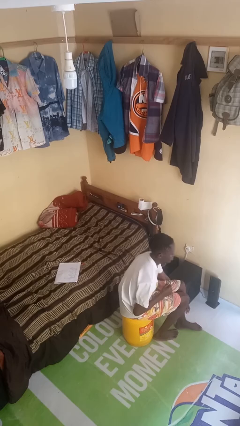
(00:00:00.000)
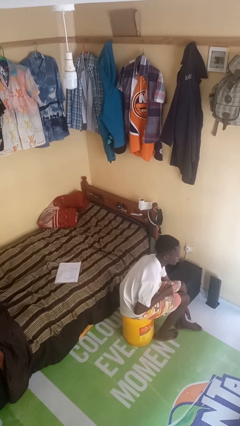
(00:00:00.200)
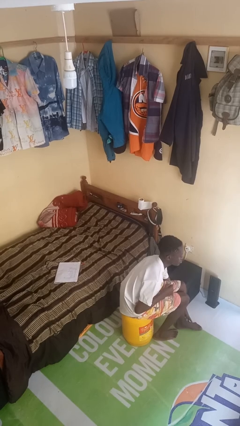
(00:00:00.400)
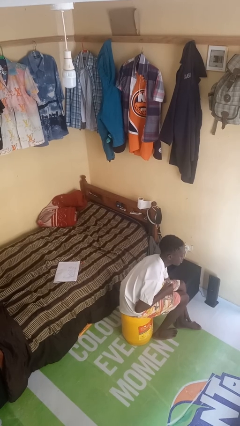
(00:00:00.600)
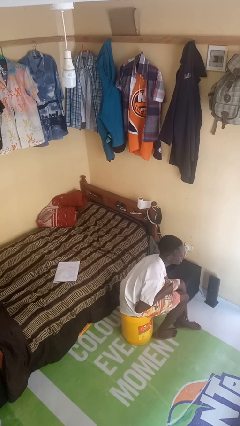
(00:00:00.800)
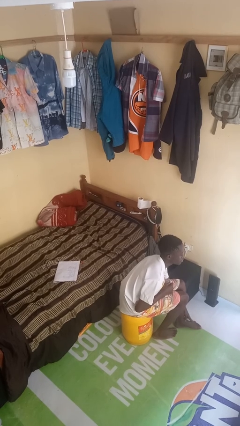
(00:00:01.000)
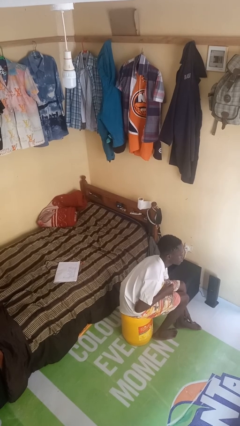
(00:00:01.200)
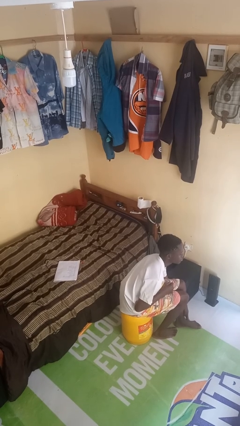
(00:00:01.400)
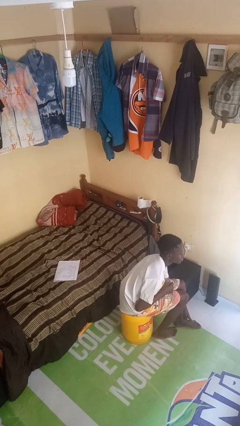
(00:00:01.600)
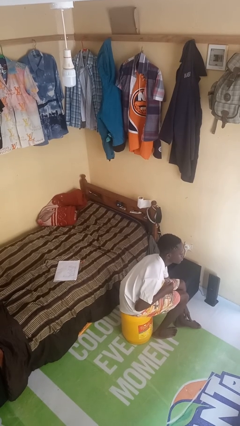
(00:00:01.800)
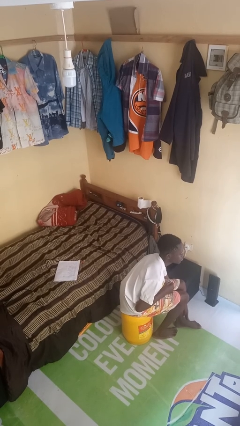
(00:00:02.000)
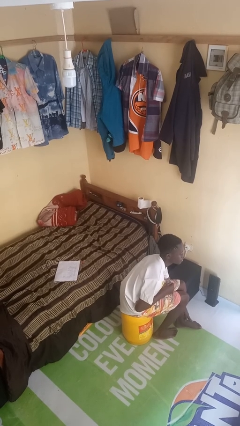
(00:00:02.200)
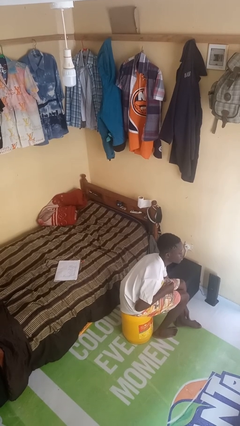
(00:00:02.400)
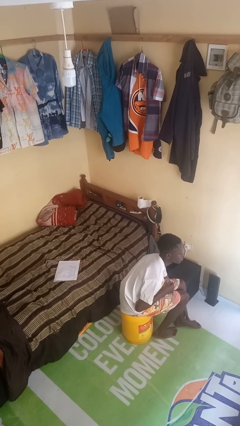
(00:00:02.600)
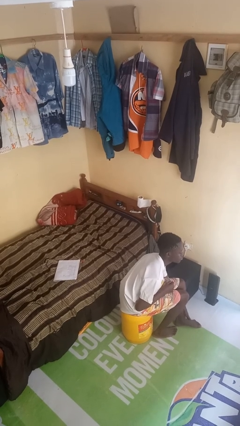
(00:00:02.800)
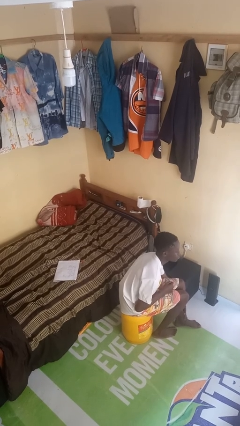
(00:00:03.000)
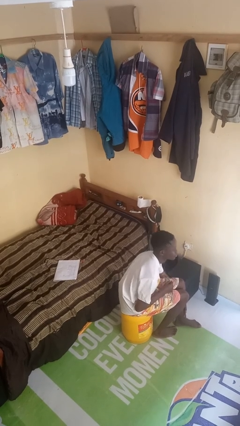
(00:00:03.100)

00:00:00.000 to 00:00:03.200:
person rubs foot

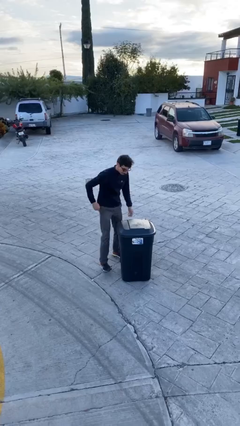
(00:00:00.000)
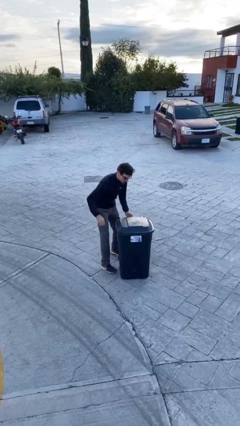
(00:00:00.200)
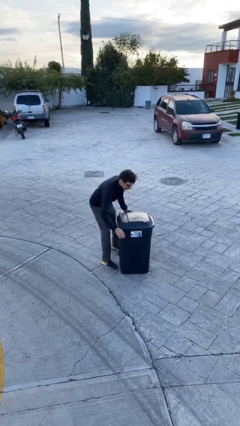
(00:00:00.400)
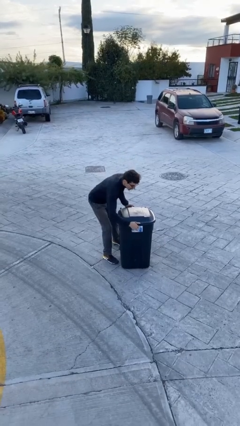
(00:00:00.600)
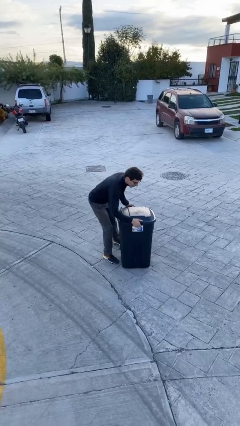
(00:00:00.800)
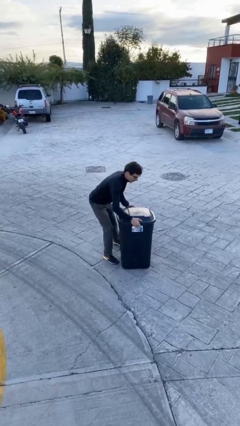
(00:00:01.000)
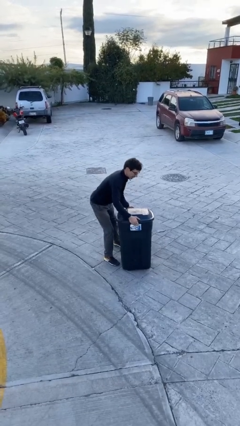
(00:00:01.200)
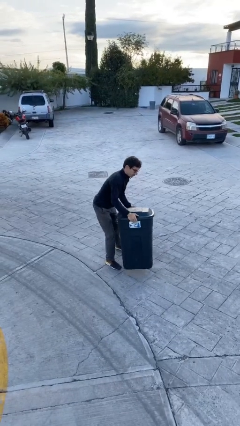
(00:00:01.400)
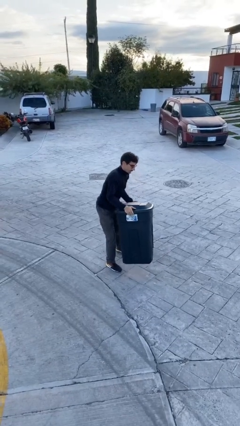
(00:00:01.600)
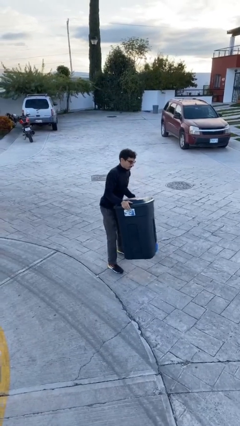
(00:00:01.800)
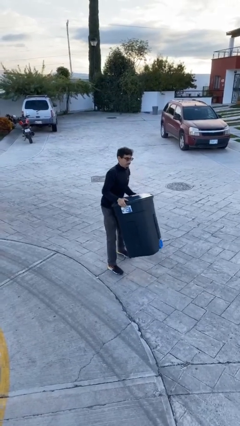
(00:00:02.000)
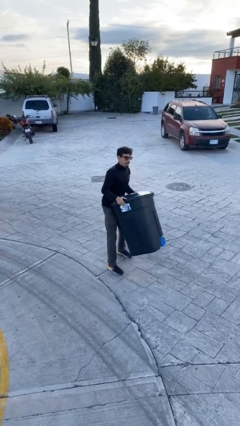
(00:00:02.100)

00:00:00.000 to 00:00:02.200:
person picks up object from floor

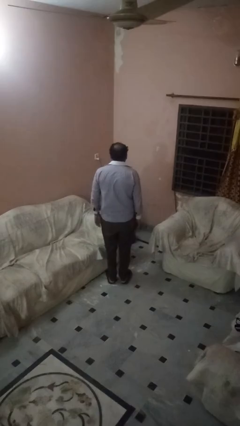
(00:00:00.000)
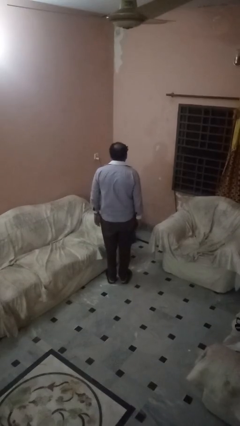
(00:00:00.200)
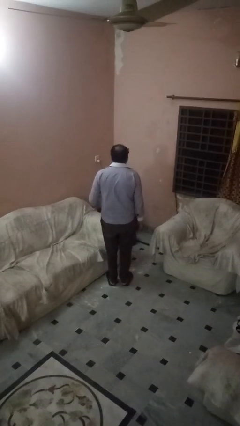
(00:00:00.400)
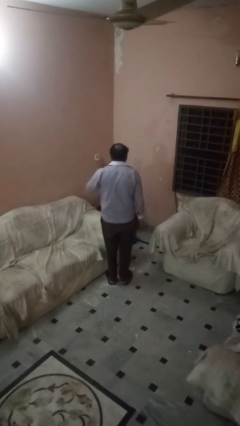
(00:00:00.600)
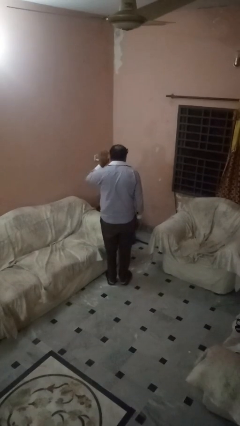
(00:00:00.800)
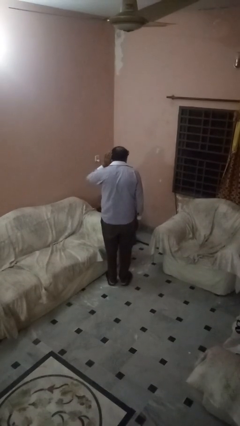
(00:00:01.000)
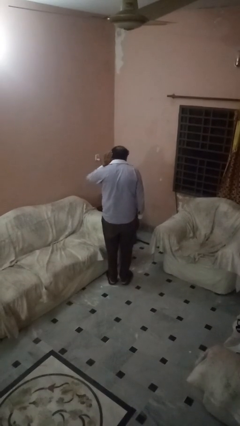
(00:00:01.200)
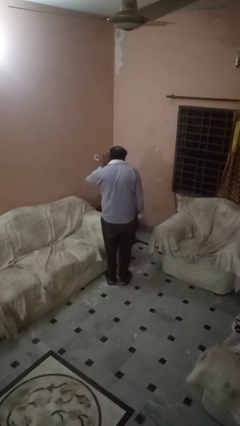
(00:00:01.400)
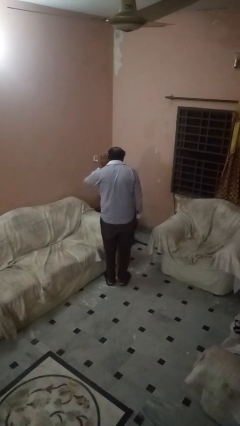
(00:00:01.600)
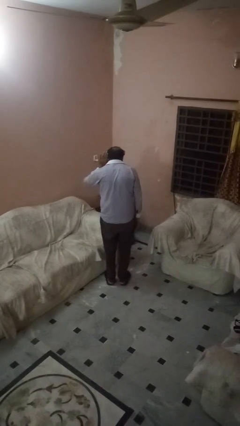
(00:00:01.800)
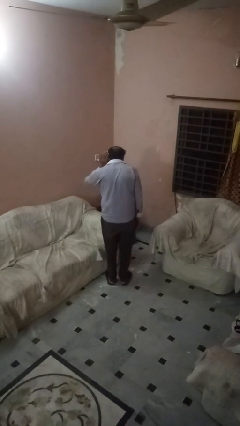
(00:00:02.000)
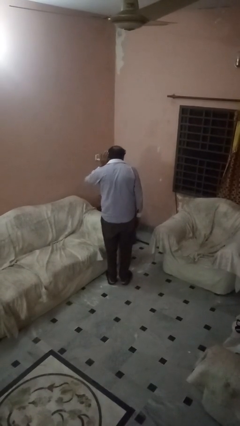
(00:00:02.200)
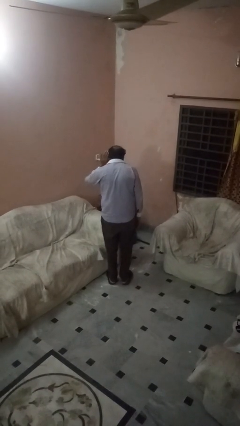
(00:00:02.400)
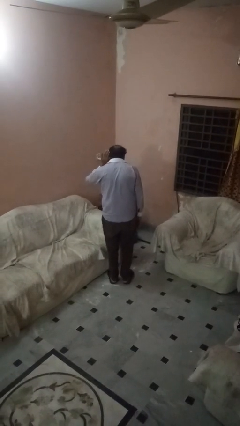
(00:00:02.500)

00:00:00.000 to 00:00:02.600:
person gestures listen closely

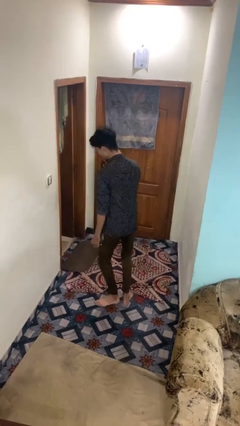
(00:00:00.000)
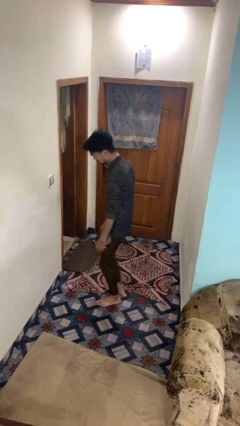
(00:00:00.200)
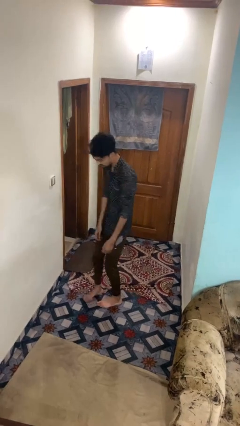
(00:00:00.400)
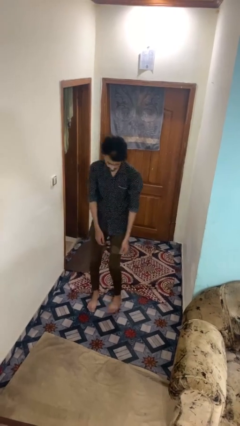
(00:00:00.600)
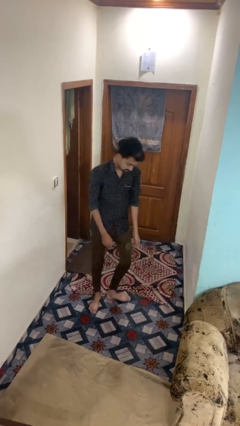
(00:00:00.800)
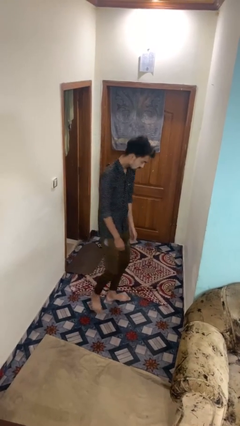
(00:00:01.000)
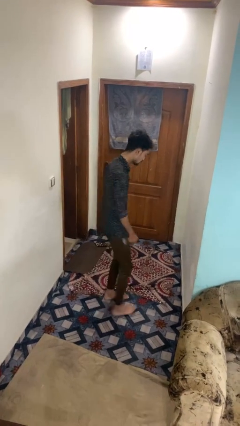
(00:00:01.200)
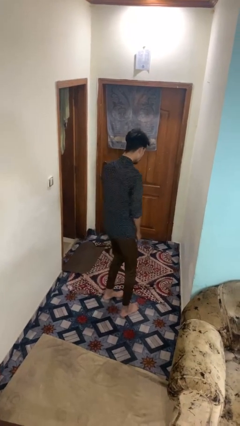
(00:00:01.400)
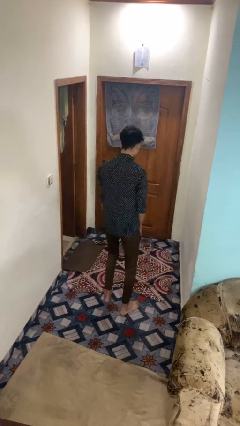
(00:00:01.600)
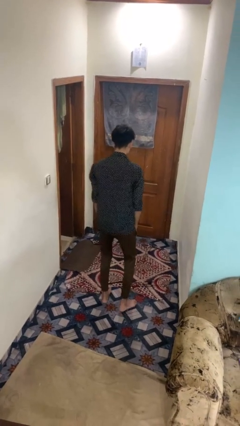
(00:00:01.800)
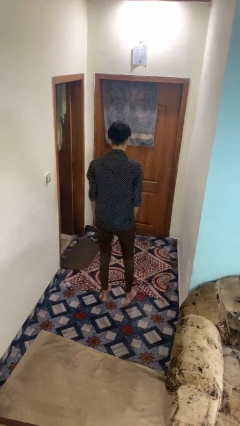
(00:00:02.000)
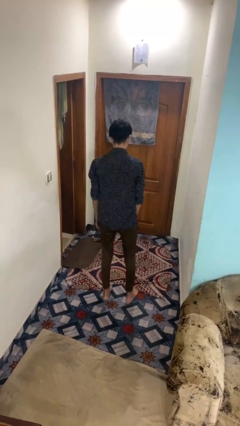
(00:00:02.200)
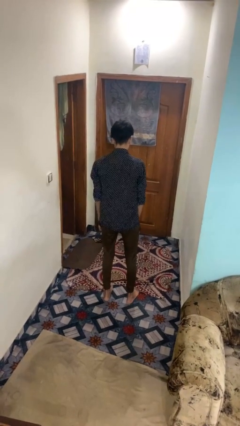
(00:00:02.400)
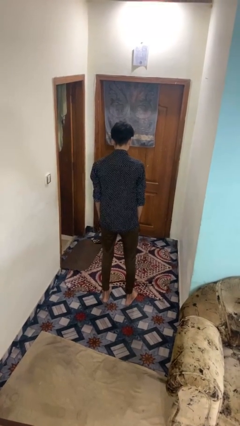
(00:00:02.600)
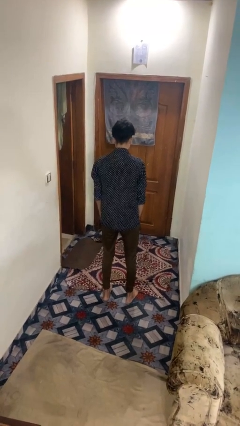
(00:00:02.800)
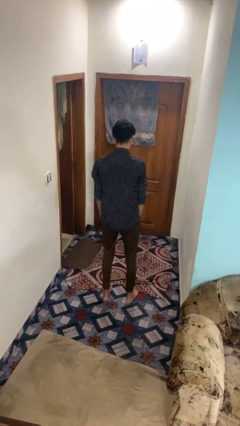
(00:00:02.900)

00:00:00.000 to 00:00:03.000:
person twirls

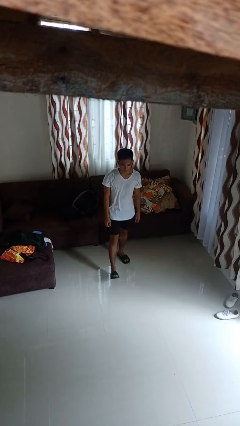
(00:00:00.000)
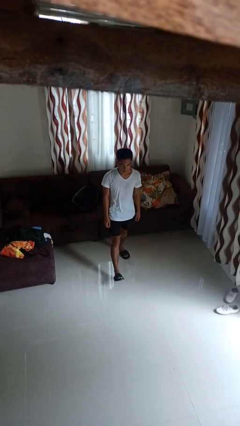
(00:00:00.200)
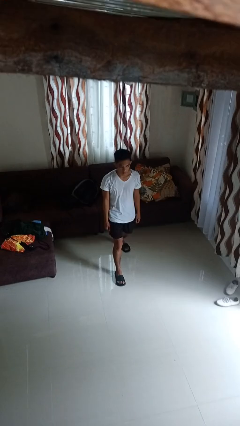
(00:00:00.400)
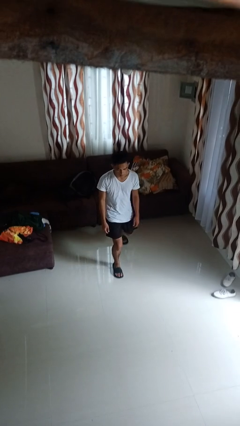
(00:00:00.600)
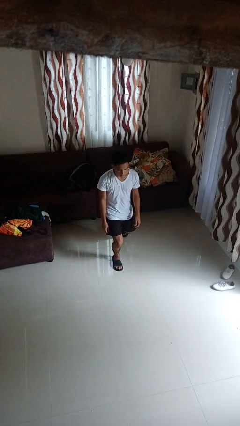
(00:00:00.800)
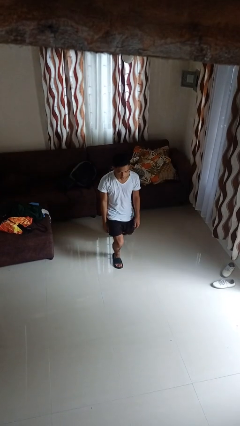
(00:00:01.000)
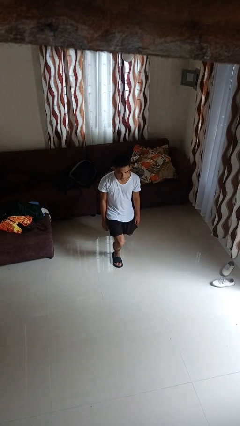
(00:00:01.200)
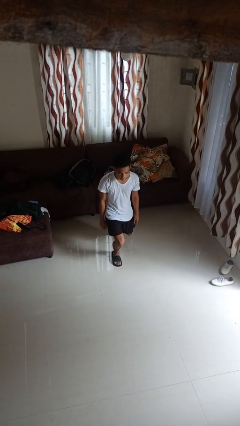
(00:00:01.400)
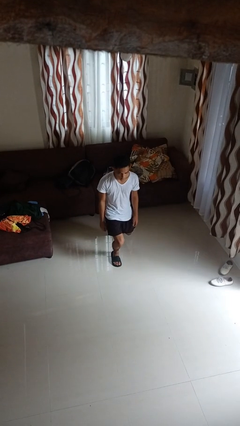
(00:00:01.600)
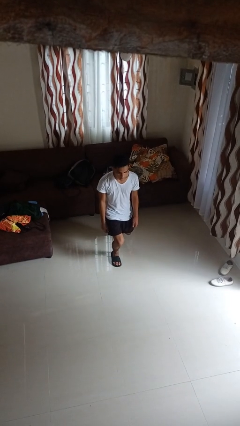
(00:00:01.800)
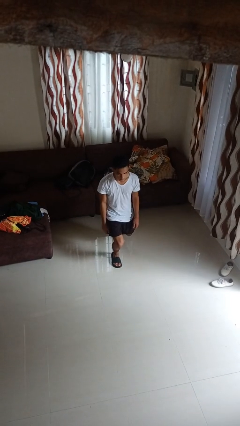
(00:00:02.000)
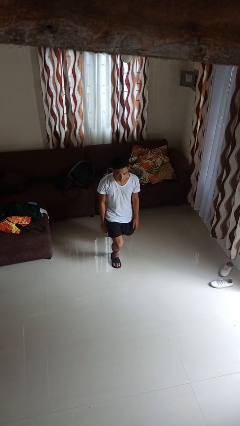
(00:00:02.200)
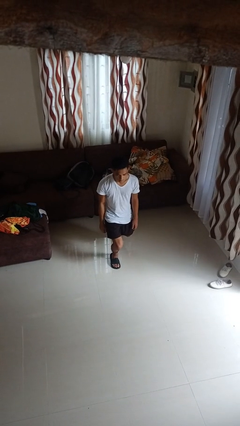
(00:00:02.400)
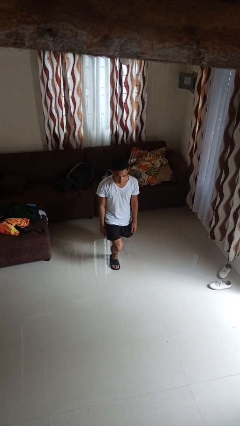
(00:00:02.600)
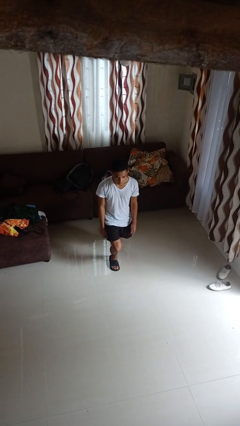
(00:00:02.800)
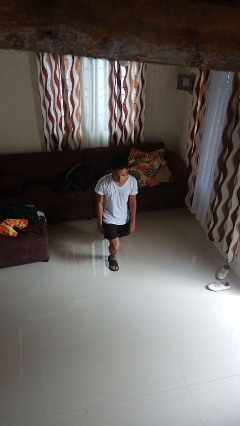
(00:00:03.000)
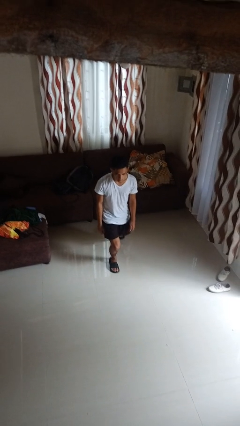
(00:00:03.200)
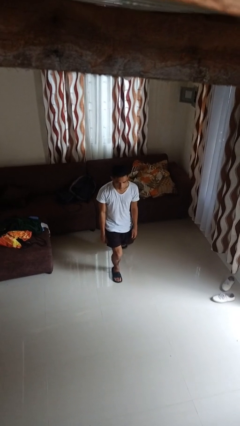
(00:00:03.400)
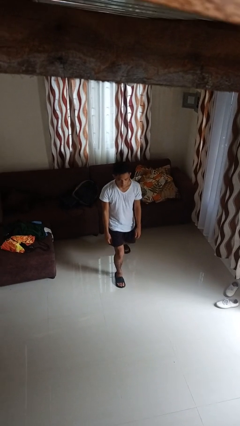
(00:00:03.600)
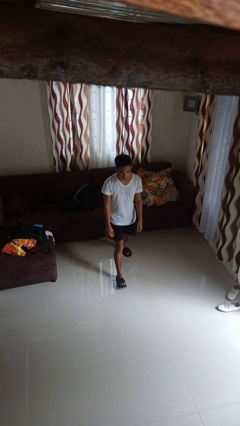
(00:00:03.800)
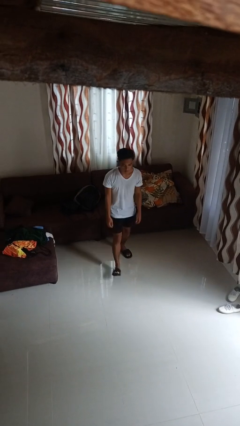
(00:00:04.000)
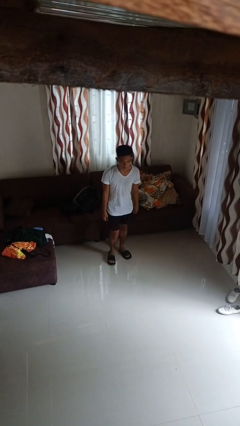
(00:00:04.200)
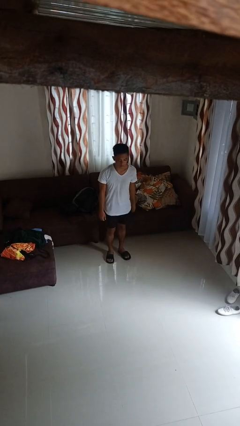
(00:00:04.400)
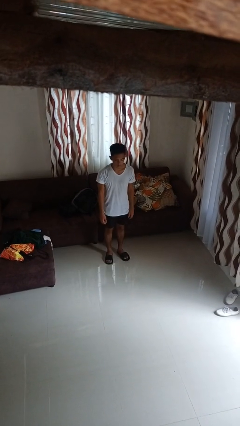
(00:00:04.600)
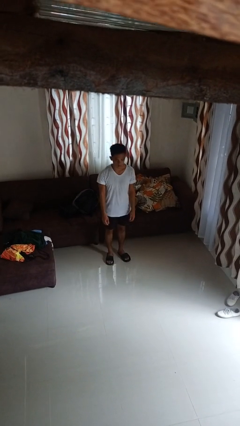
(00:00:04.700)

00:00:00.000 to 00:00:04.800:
person exercises with lunges

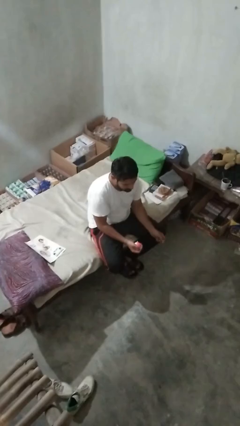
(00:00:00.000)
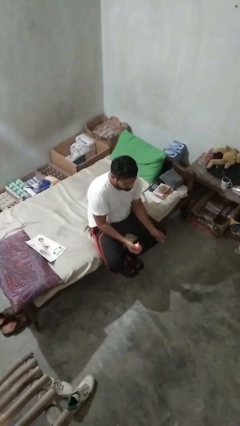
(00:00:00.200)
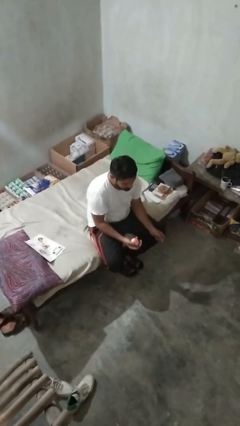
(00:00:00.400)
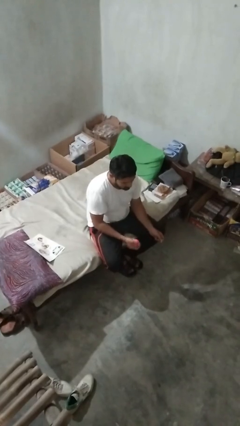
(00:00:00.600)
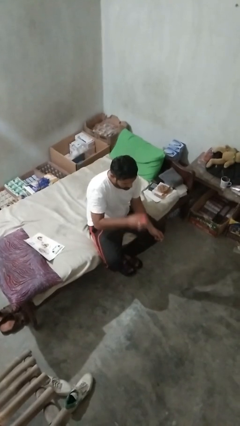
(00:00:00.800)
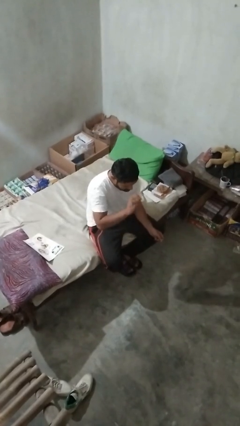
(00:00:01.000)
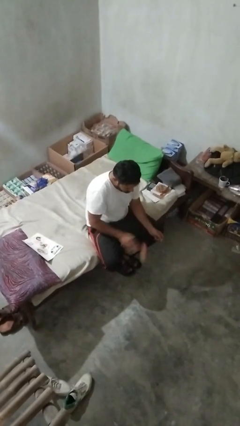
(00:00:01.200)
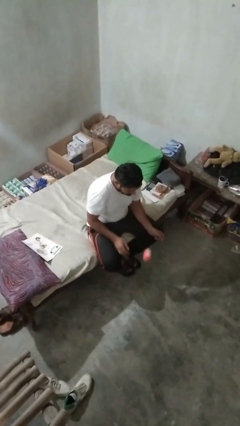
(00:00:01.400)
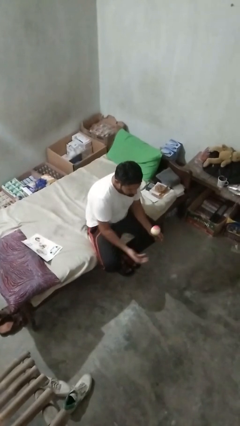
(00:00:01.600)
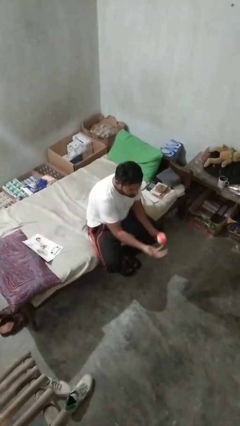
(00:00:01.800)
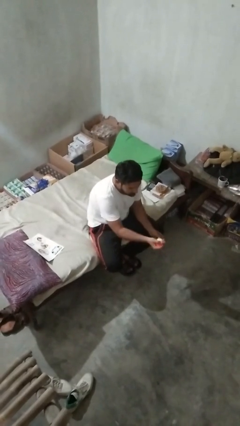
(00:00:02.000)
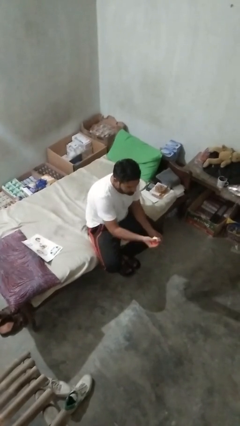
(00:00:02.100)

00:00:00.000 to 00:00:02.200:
person bounces ball on floor
